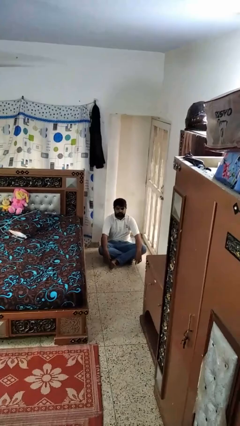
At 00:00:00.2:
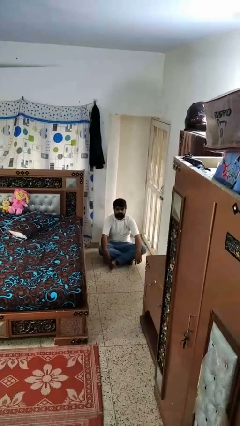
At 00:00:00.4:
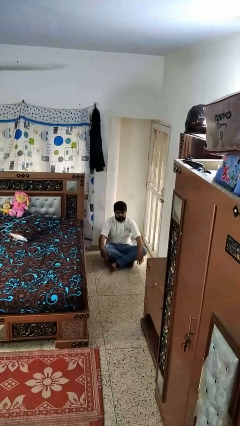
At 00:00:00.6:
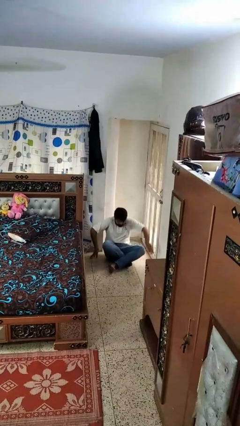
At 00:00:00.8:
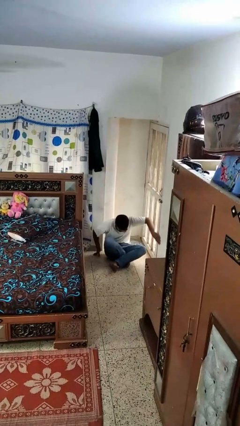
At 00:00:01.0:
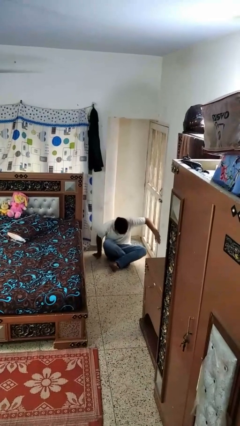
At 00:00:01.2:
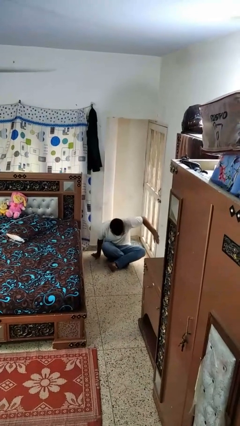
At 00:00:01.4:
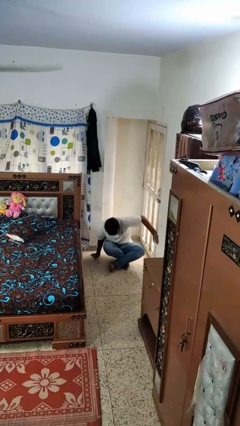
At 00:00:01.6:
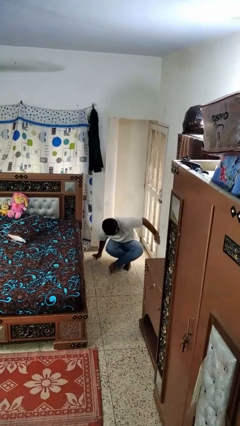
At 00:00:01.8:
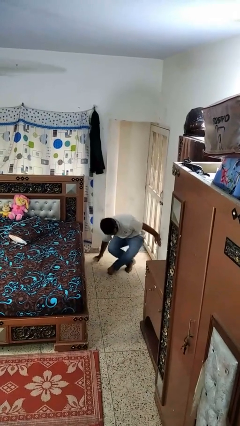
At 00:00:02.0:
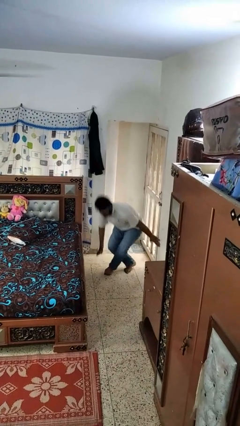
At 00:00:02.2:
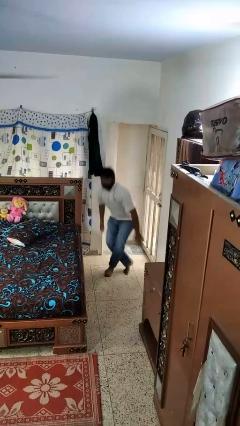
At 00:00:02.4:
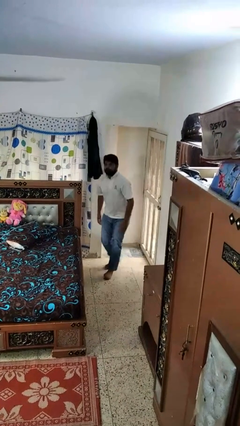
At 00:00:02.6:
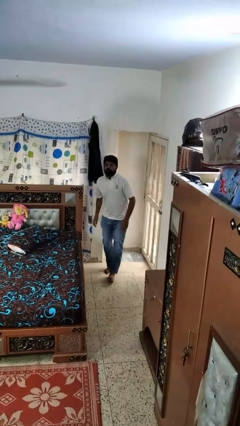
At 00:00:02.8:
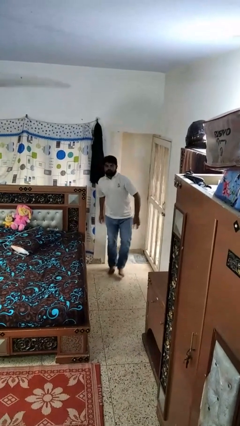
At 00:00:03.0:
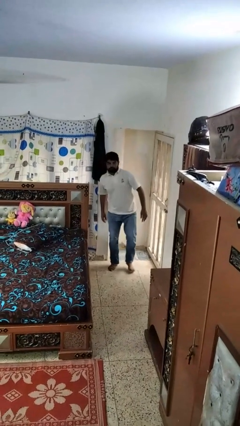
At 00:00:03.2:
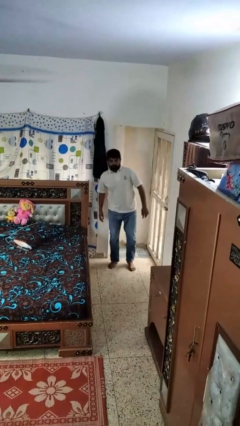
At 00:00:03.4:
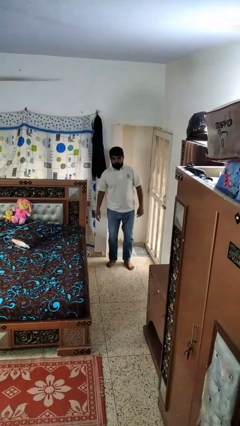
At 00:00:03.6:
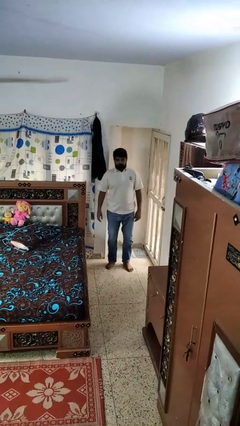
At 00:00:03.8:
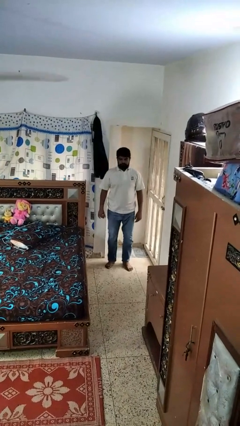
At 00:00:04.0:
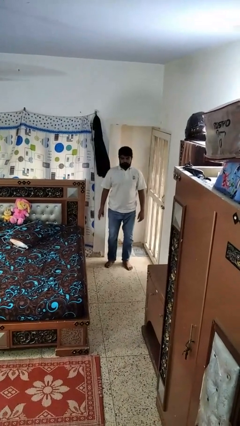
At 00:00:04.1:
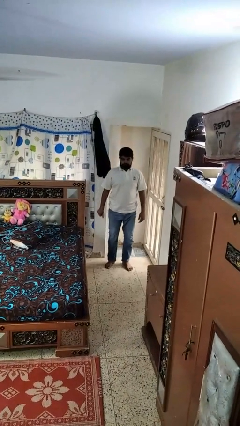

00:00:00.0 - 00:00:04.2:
person stands up from floor

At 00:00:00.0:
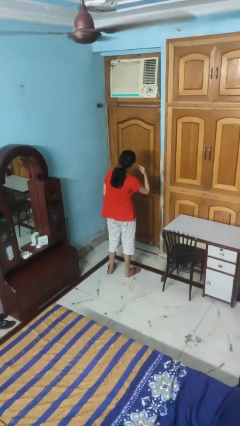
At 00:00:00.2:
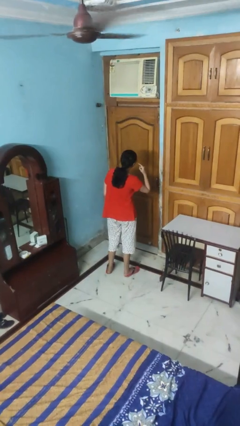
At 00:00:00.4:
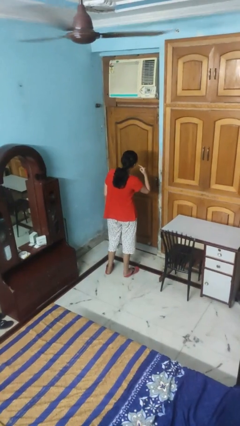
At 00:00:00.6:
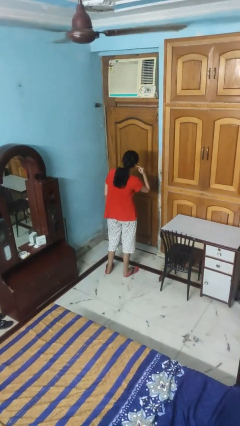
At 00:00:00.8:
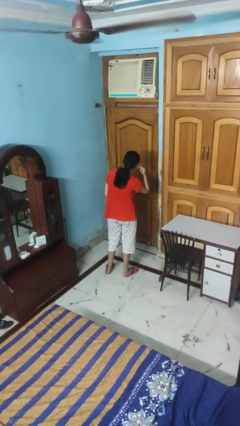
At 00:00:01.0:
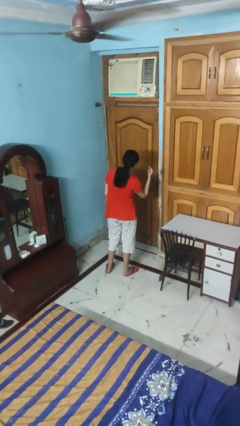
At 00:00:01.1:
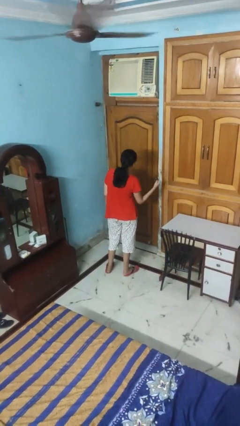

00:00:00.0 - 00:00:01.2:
person gestures listen closely

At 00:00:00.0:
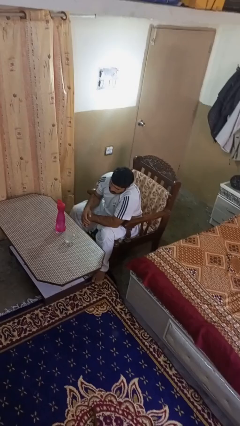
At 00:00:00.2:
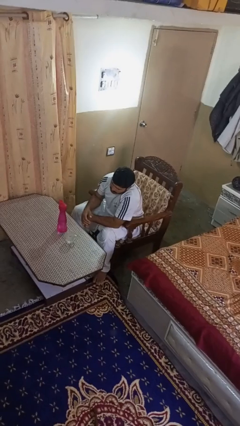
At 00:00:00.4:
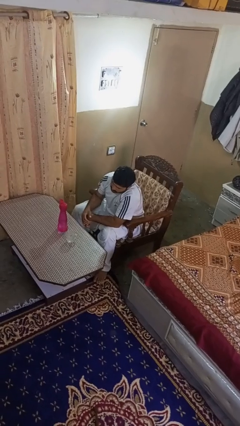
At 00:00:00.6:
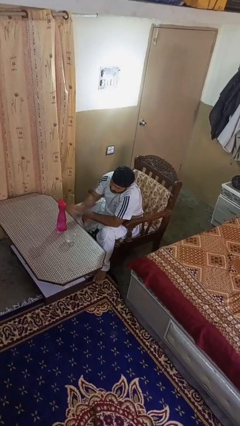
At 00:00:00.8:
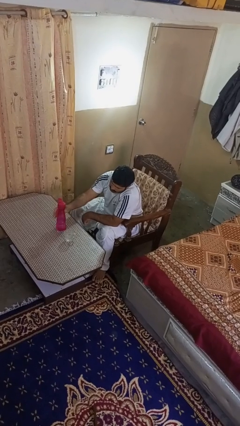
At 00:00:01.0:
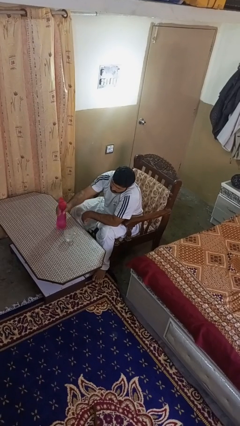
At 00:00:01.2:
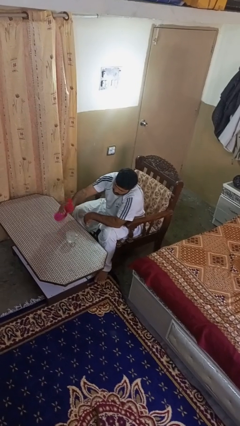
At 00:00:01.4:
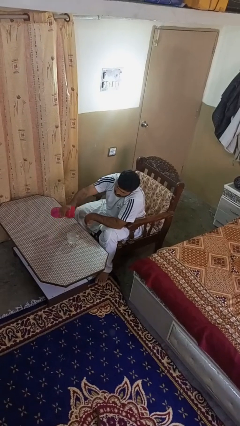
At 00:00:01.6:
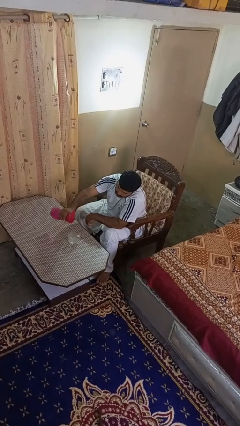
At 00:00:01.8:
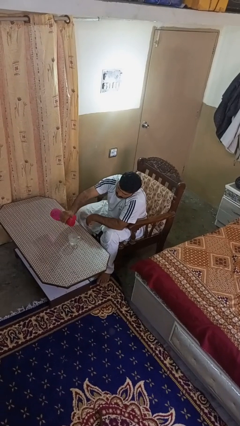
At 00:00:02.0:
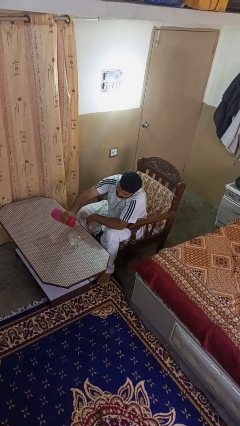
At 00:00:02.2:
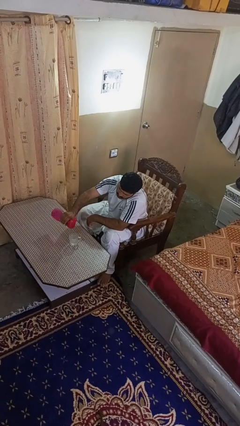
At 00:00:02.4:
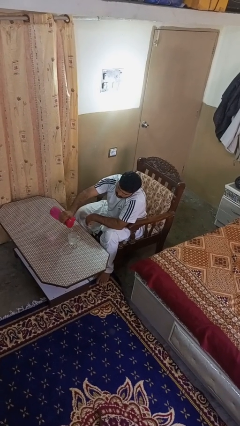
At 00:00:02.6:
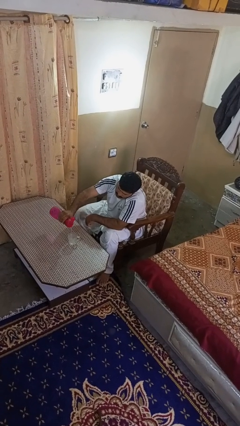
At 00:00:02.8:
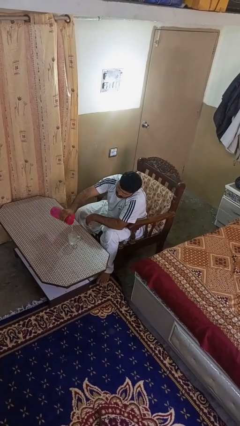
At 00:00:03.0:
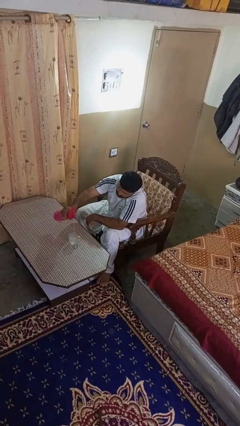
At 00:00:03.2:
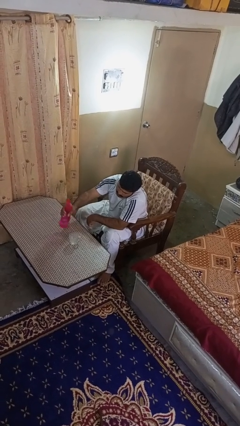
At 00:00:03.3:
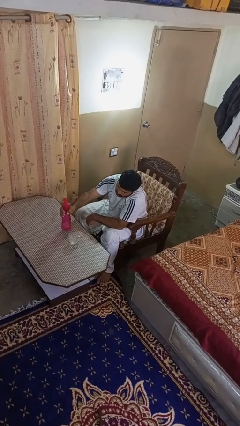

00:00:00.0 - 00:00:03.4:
person pours liquid into cup

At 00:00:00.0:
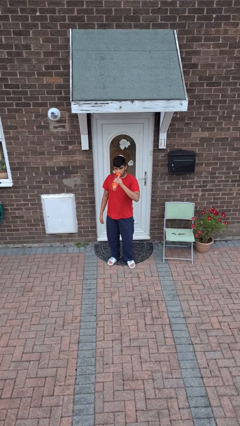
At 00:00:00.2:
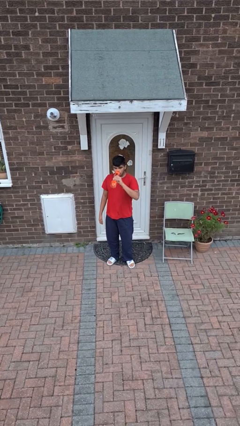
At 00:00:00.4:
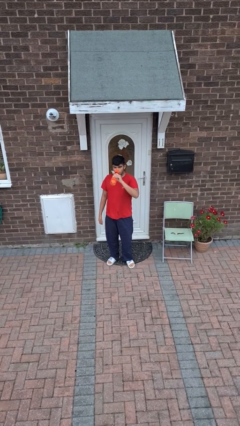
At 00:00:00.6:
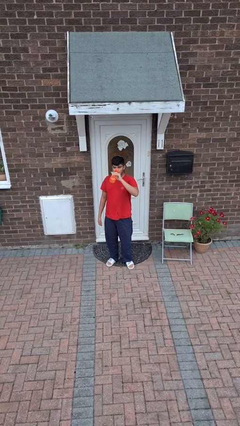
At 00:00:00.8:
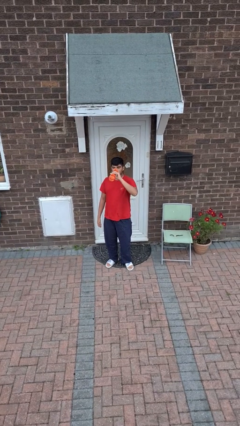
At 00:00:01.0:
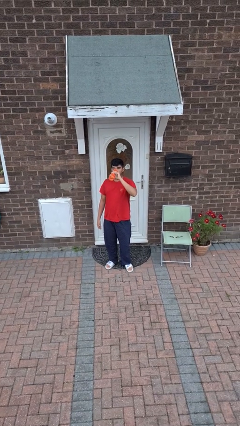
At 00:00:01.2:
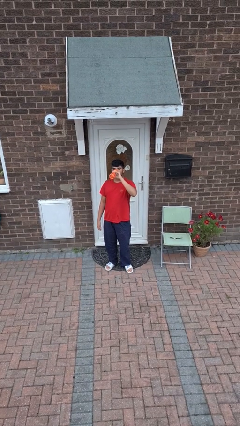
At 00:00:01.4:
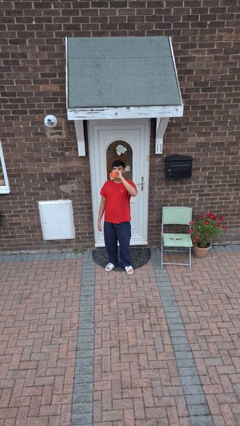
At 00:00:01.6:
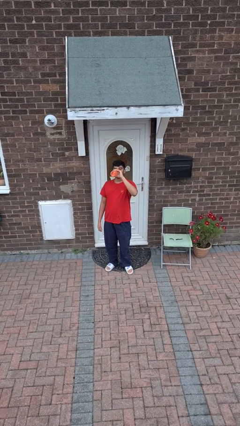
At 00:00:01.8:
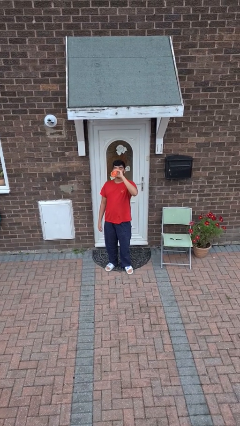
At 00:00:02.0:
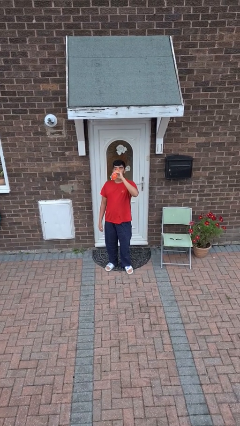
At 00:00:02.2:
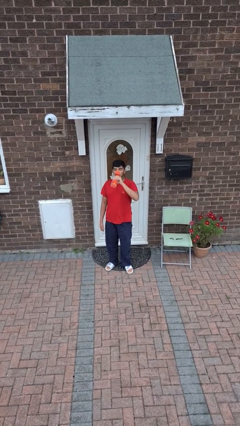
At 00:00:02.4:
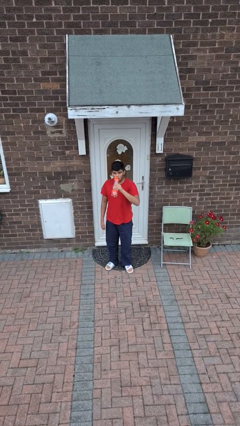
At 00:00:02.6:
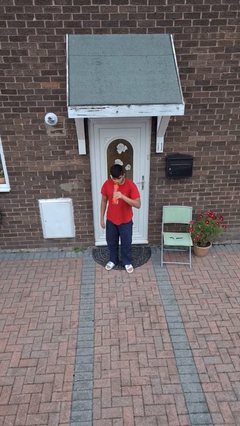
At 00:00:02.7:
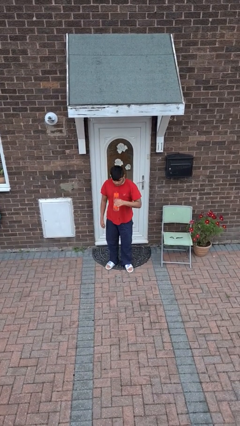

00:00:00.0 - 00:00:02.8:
person drinks from bottle

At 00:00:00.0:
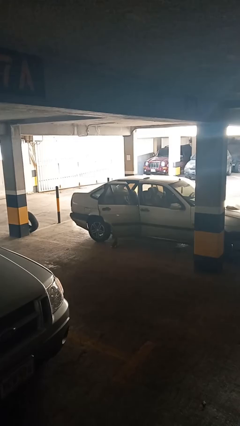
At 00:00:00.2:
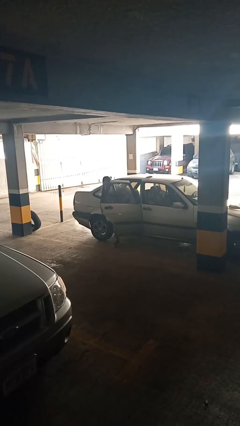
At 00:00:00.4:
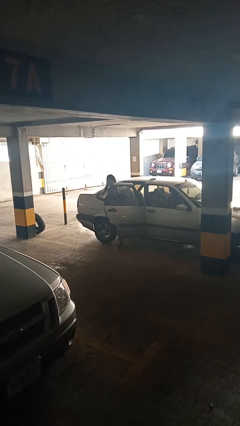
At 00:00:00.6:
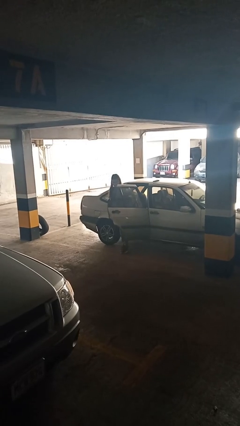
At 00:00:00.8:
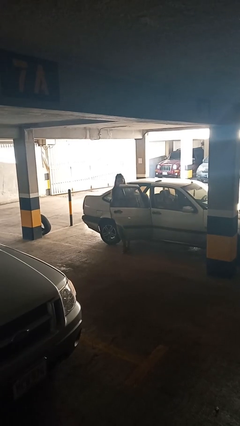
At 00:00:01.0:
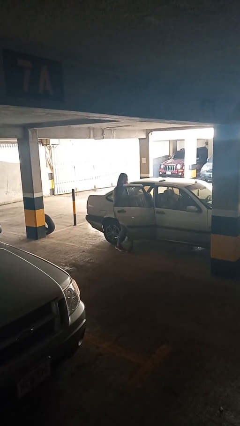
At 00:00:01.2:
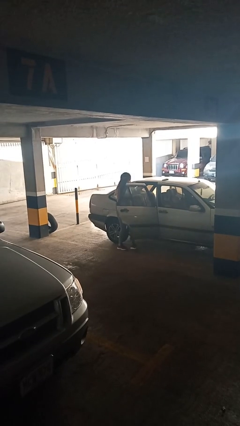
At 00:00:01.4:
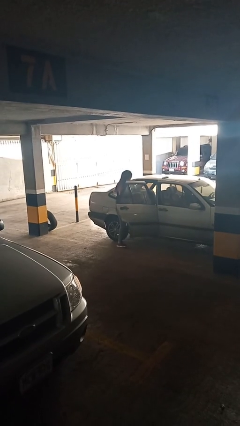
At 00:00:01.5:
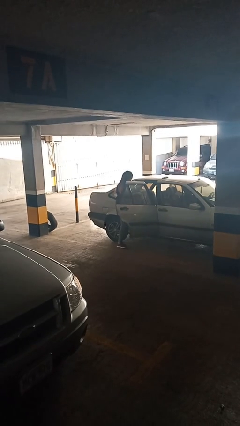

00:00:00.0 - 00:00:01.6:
person exits car

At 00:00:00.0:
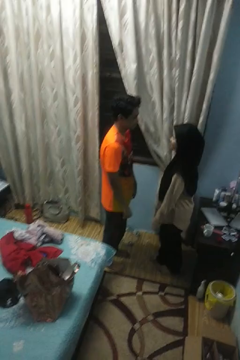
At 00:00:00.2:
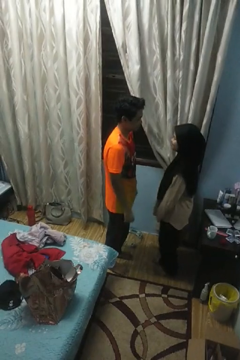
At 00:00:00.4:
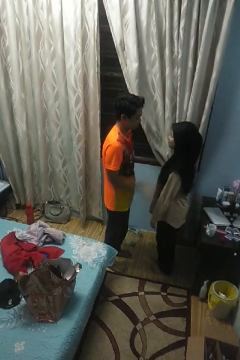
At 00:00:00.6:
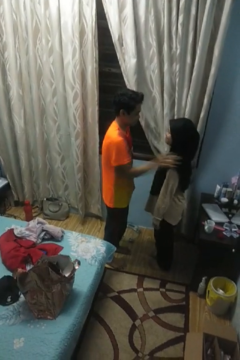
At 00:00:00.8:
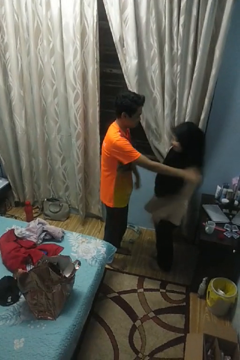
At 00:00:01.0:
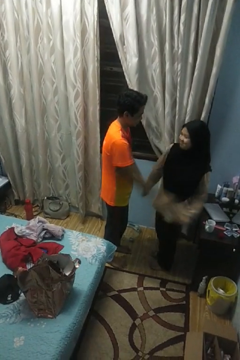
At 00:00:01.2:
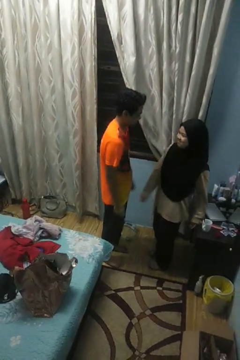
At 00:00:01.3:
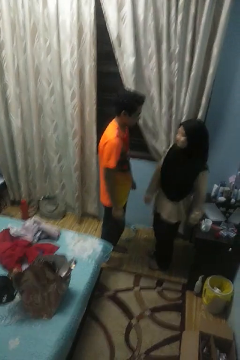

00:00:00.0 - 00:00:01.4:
person shoves person

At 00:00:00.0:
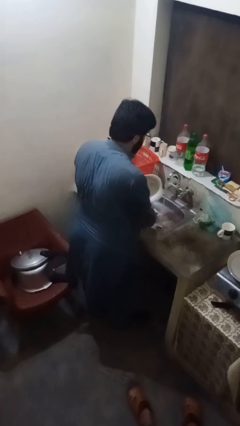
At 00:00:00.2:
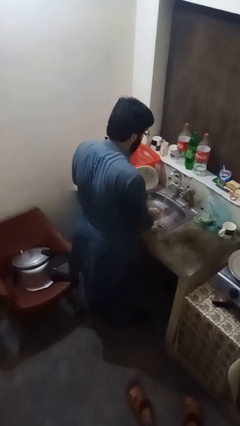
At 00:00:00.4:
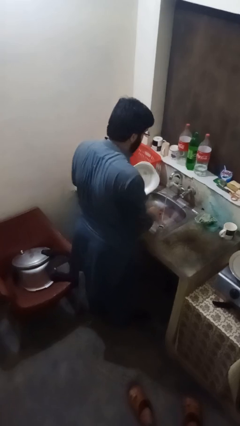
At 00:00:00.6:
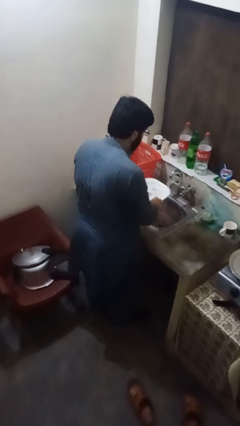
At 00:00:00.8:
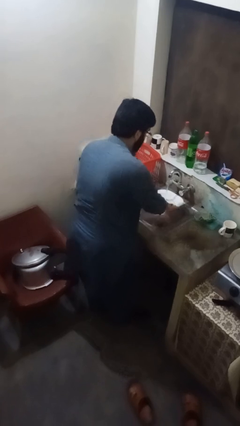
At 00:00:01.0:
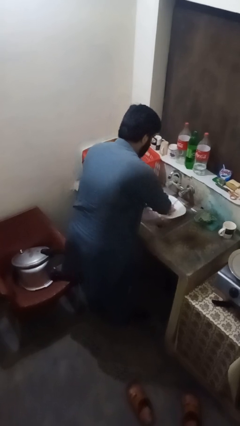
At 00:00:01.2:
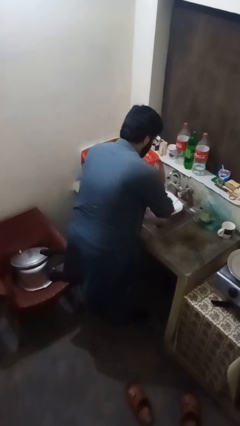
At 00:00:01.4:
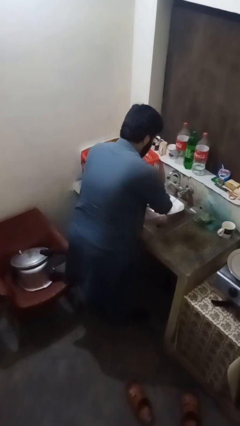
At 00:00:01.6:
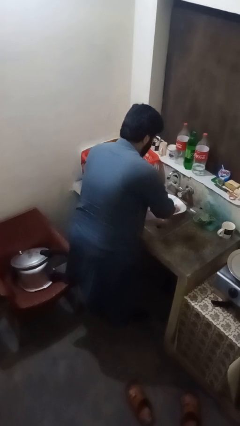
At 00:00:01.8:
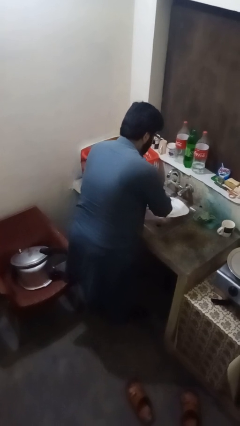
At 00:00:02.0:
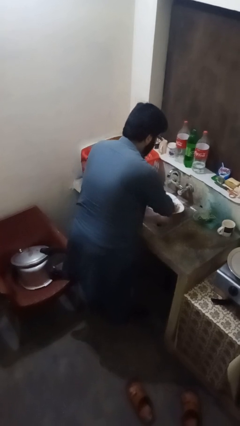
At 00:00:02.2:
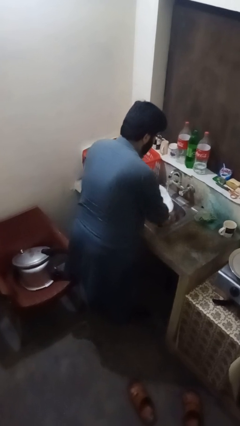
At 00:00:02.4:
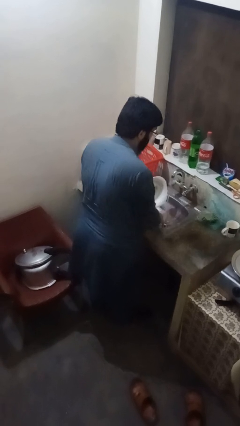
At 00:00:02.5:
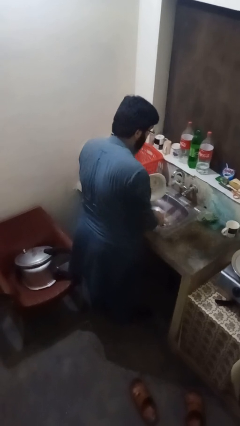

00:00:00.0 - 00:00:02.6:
person washes dish
